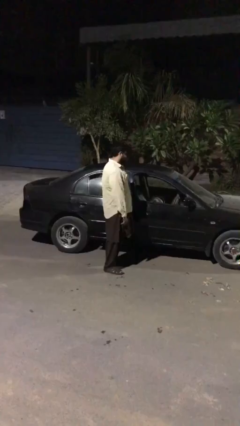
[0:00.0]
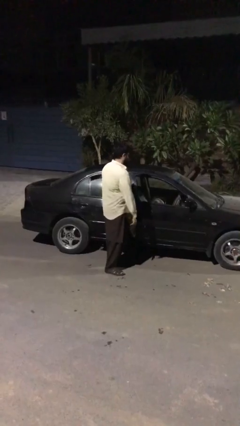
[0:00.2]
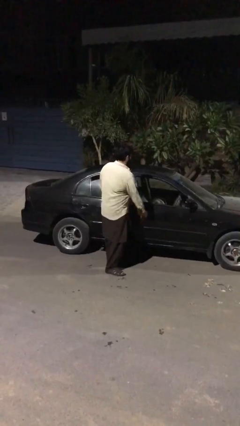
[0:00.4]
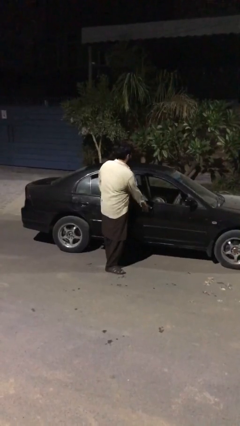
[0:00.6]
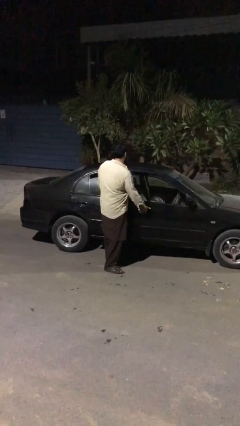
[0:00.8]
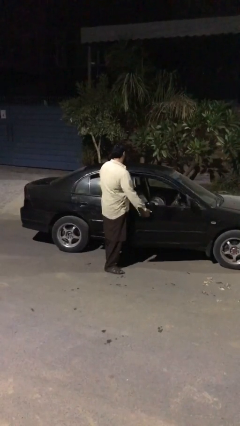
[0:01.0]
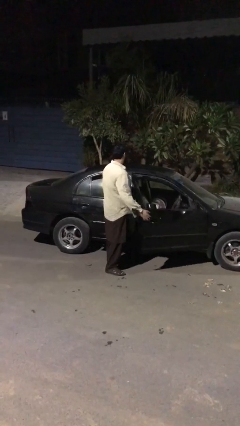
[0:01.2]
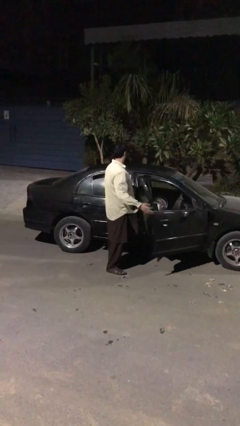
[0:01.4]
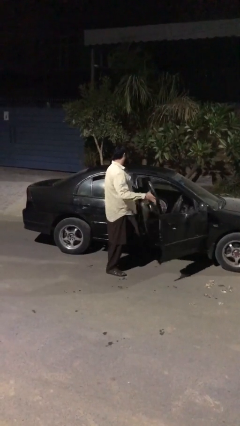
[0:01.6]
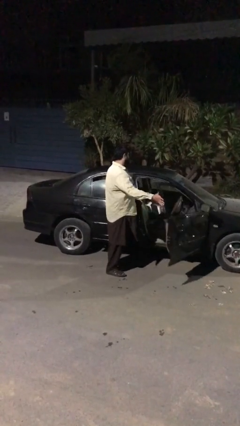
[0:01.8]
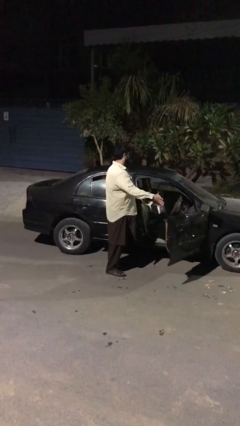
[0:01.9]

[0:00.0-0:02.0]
person opens car door

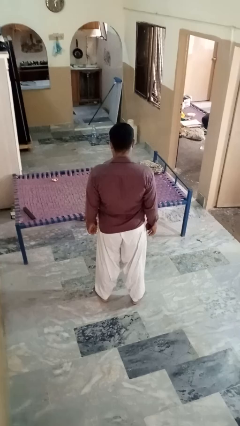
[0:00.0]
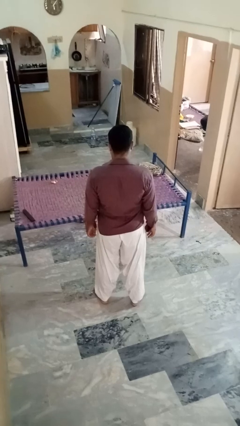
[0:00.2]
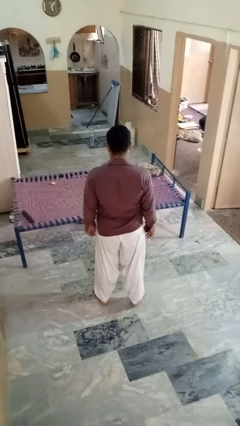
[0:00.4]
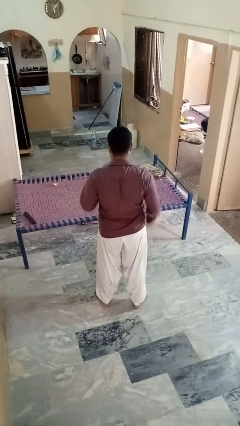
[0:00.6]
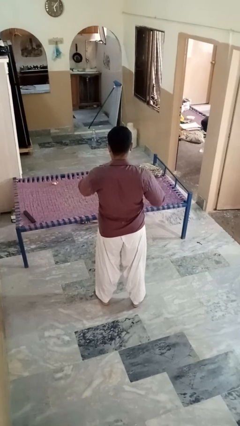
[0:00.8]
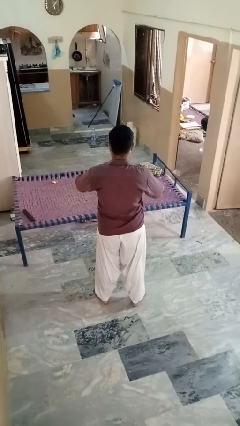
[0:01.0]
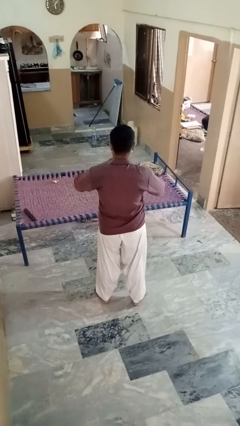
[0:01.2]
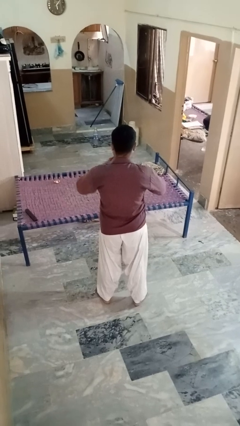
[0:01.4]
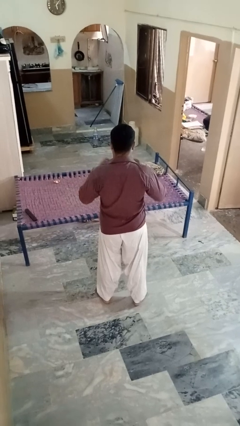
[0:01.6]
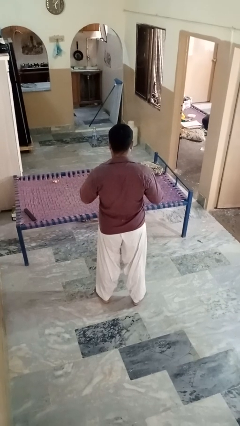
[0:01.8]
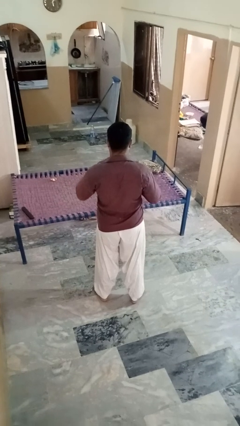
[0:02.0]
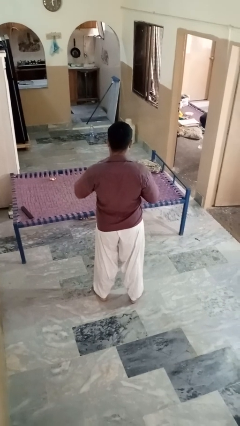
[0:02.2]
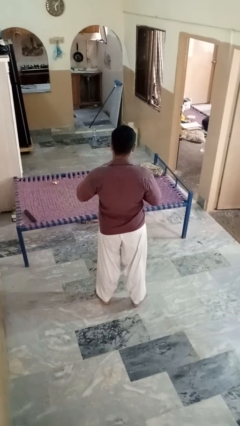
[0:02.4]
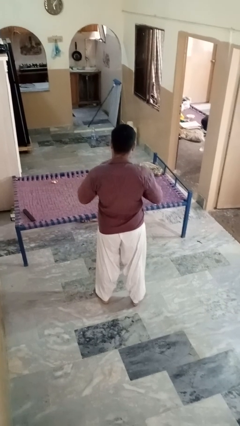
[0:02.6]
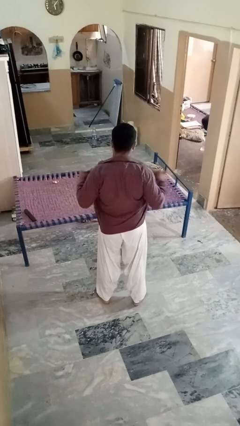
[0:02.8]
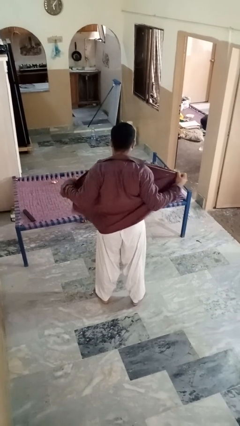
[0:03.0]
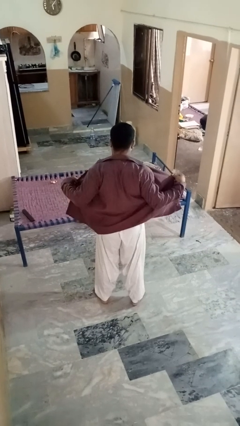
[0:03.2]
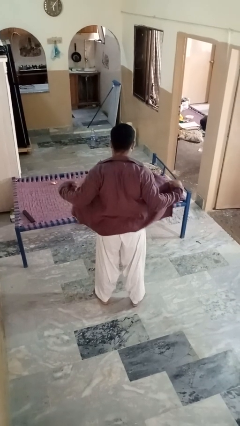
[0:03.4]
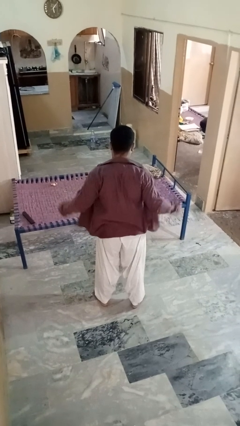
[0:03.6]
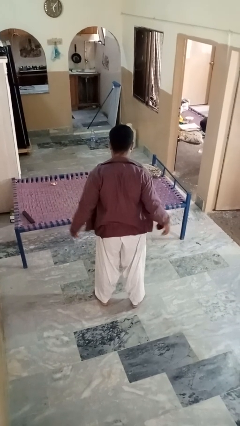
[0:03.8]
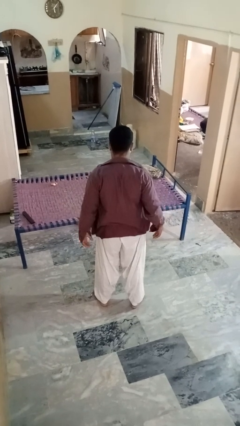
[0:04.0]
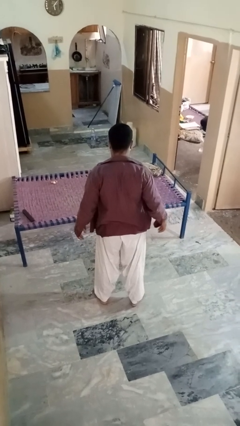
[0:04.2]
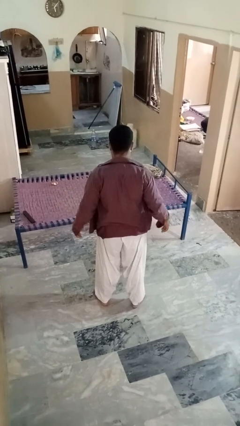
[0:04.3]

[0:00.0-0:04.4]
person unbuttons shirt

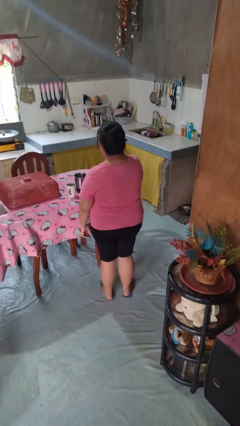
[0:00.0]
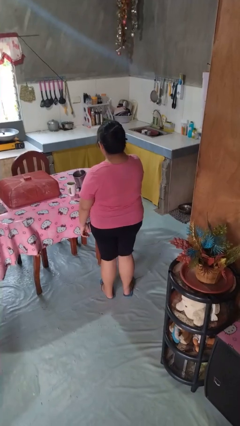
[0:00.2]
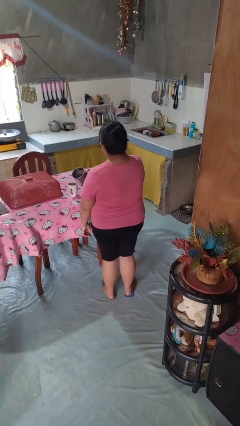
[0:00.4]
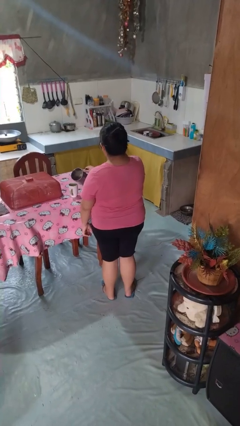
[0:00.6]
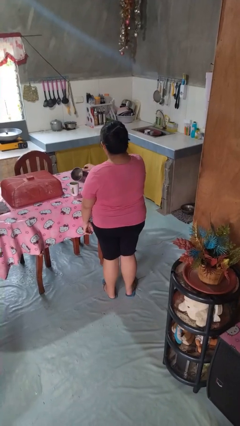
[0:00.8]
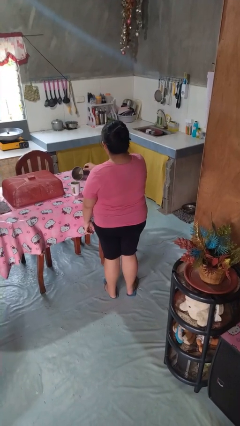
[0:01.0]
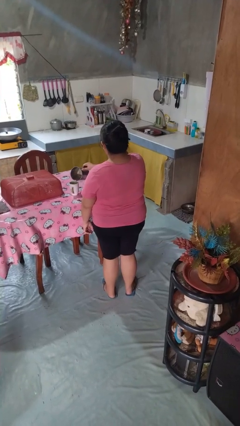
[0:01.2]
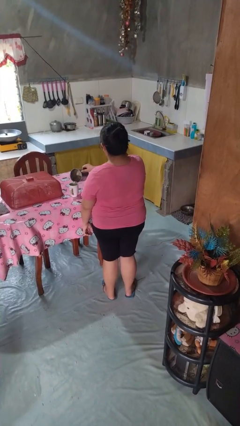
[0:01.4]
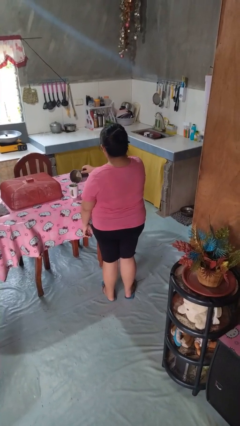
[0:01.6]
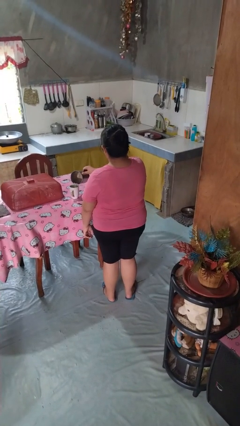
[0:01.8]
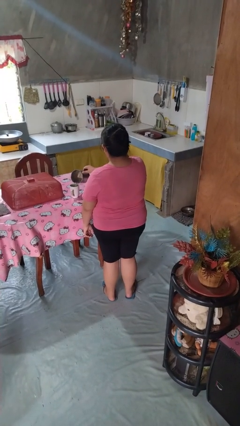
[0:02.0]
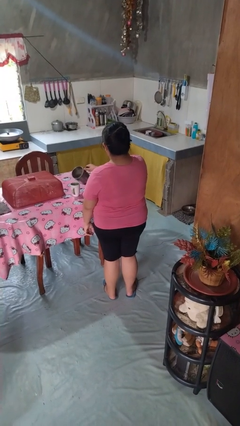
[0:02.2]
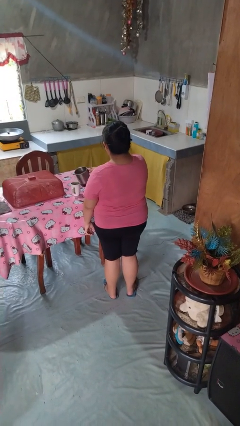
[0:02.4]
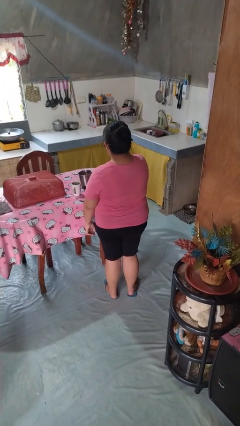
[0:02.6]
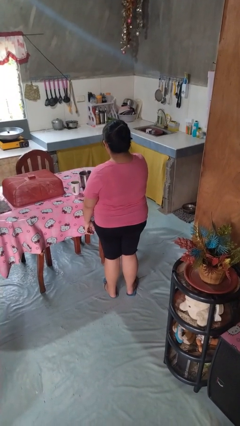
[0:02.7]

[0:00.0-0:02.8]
person pours coffee into mug

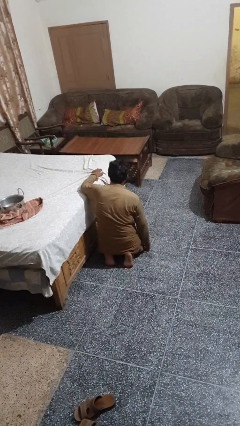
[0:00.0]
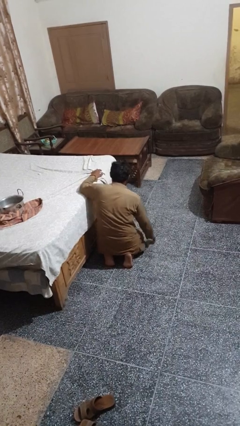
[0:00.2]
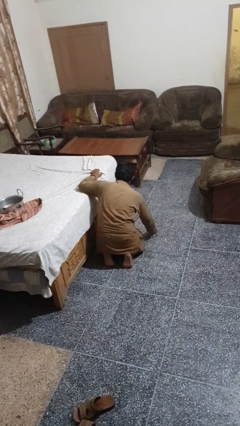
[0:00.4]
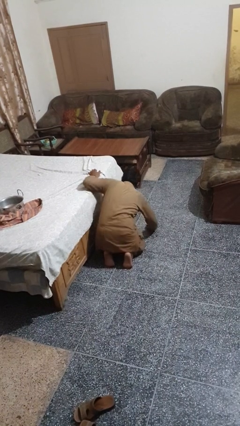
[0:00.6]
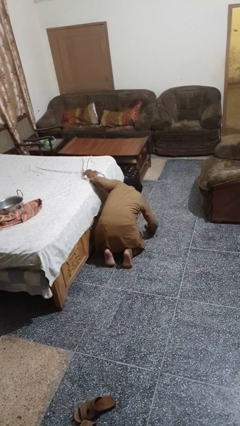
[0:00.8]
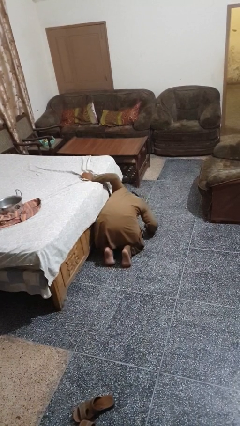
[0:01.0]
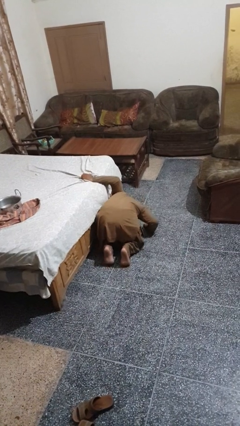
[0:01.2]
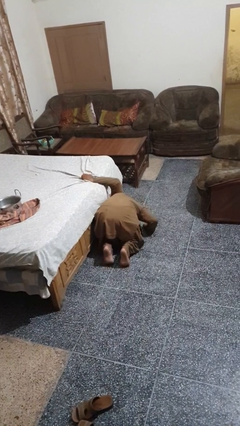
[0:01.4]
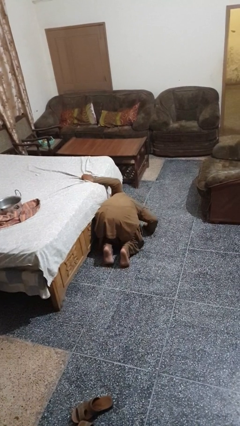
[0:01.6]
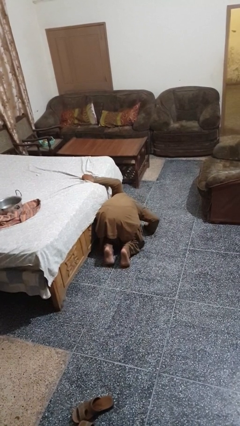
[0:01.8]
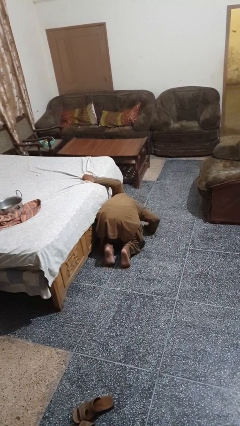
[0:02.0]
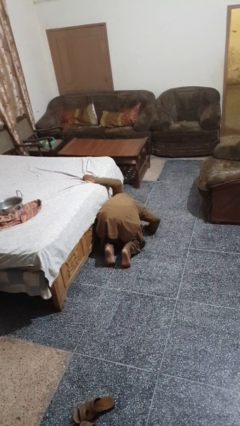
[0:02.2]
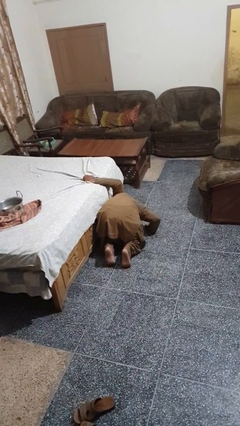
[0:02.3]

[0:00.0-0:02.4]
person searches under bed

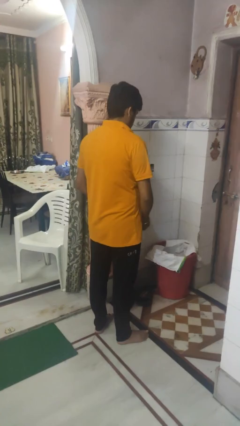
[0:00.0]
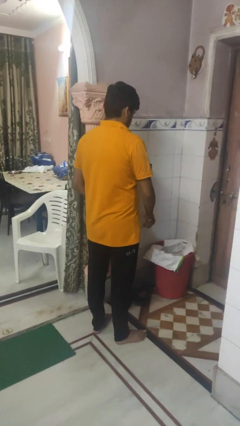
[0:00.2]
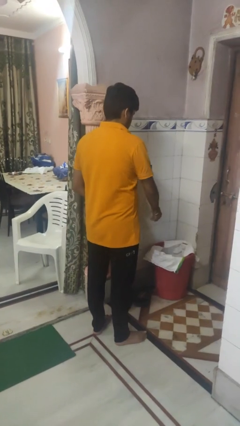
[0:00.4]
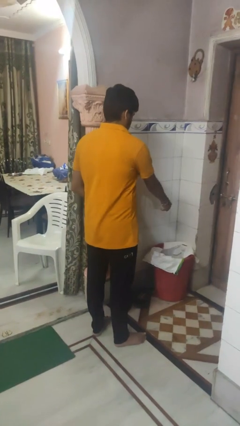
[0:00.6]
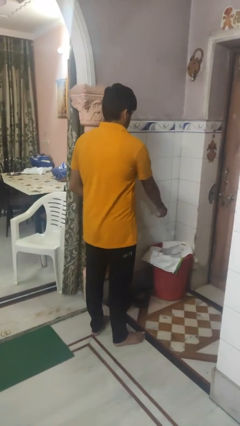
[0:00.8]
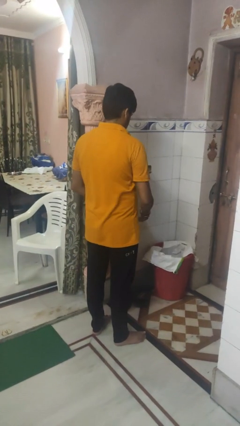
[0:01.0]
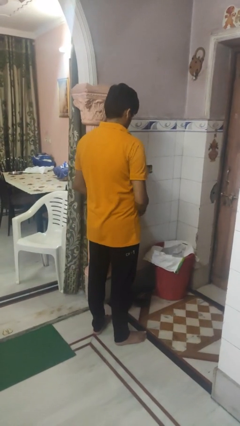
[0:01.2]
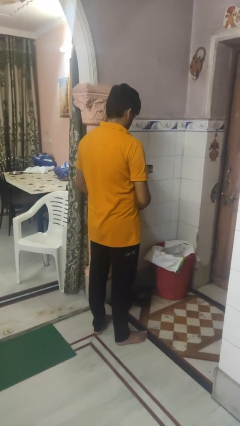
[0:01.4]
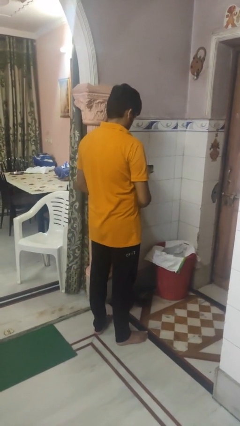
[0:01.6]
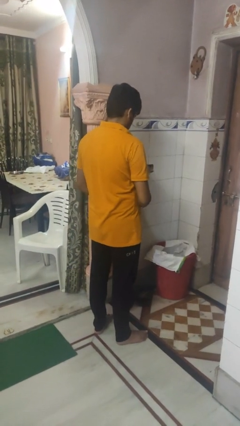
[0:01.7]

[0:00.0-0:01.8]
person discards trash

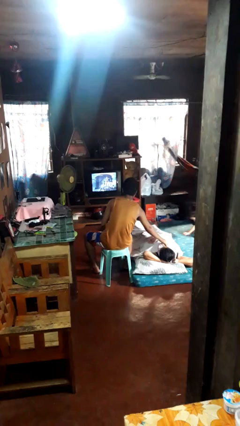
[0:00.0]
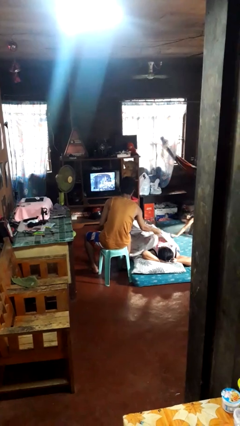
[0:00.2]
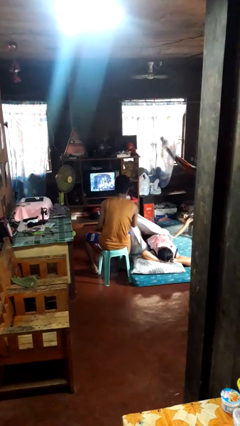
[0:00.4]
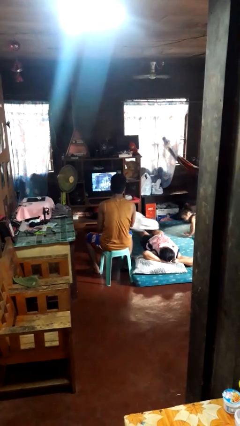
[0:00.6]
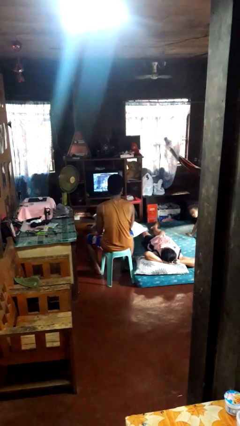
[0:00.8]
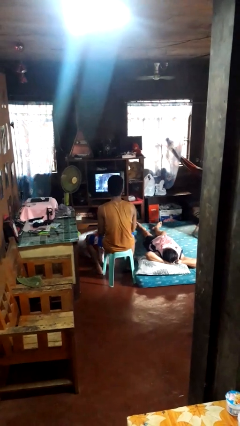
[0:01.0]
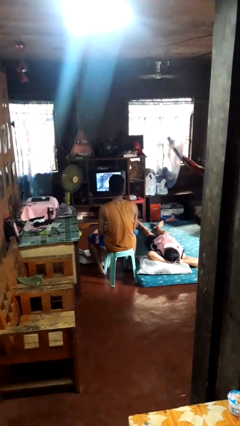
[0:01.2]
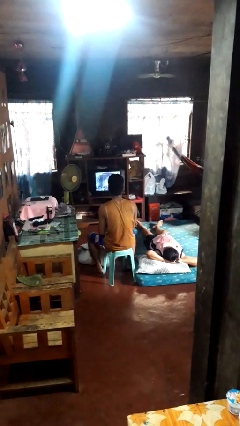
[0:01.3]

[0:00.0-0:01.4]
person uncovers friend with blanket

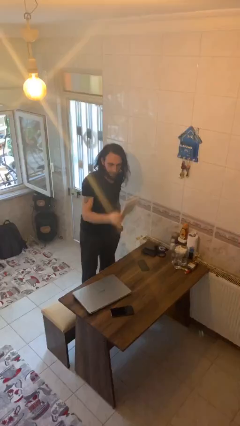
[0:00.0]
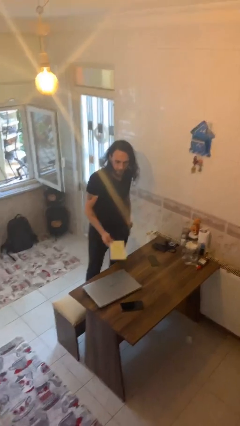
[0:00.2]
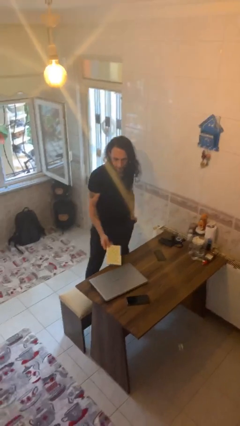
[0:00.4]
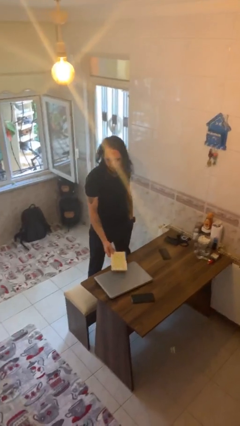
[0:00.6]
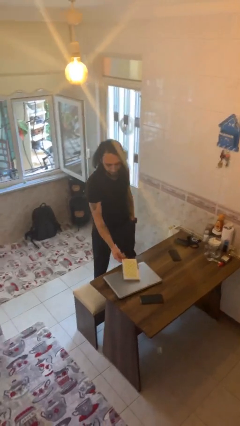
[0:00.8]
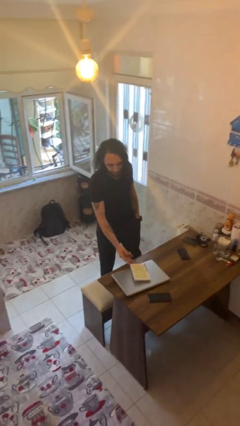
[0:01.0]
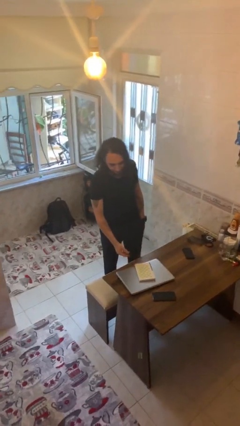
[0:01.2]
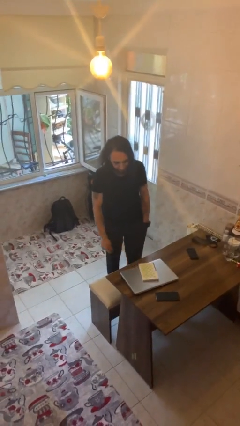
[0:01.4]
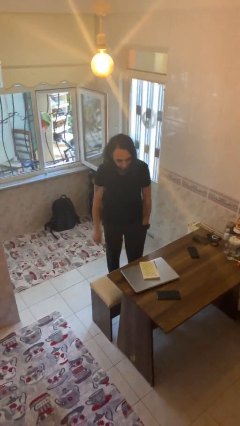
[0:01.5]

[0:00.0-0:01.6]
person puts down object on table

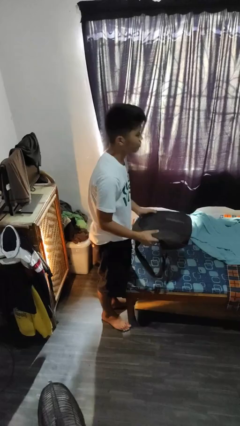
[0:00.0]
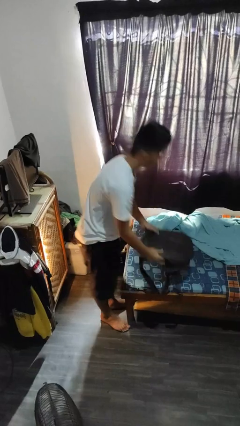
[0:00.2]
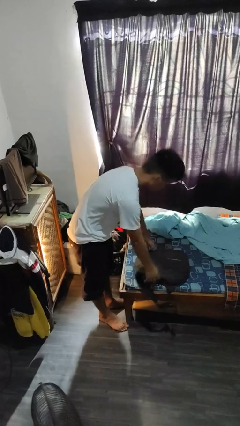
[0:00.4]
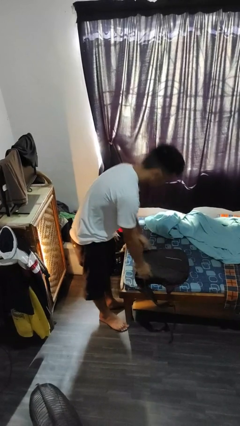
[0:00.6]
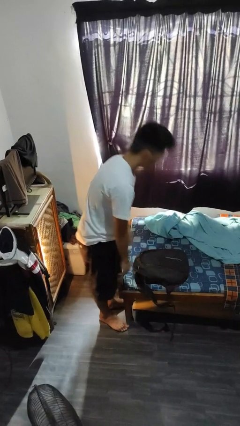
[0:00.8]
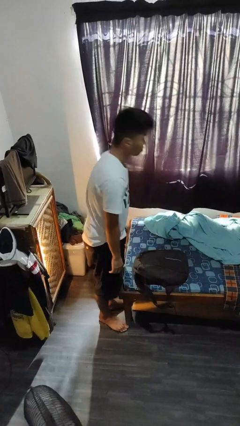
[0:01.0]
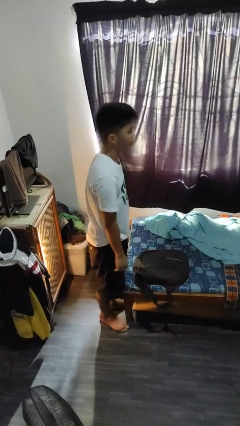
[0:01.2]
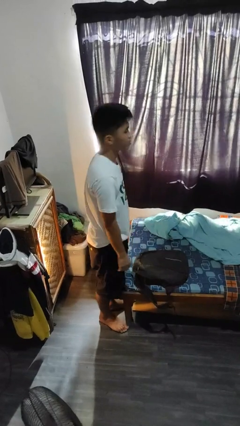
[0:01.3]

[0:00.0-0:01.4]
person puts down object on bed
